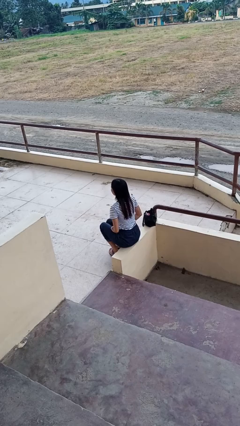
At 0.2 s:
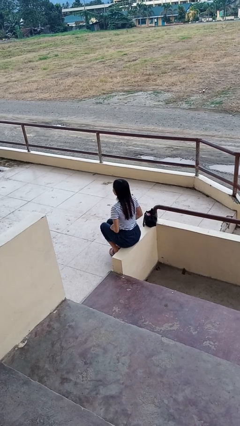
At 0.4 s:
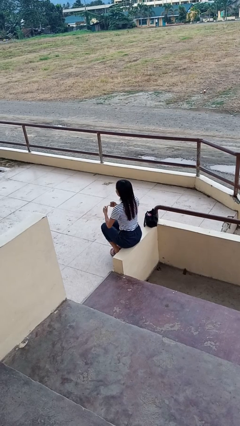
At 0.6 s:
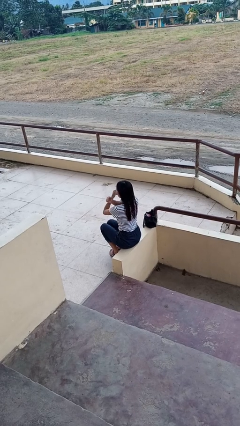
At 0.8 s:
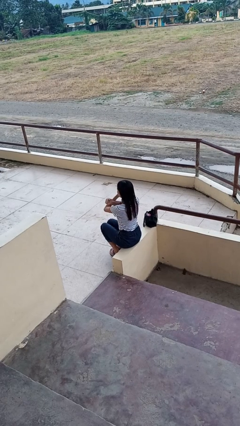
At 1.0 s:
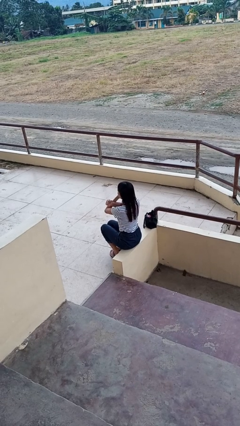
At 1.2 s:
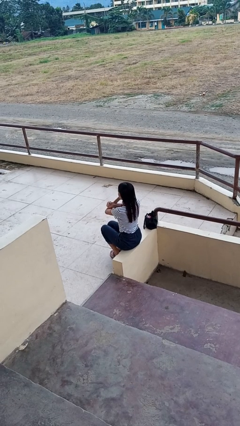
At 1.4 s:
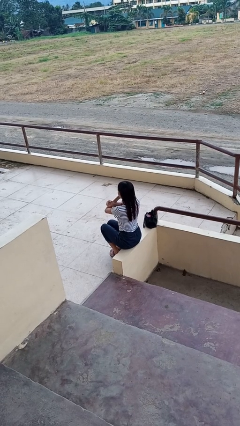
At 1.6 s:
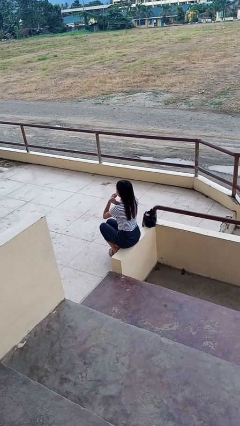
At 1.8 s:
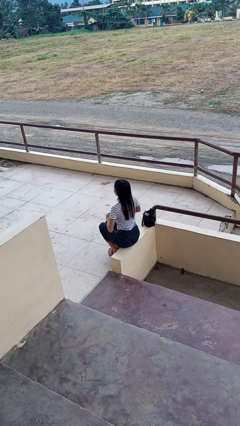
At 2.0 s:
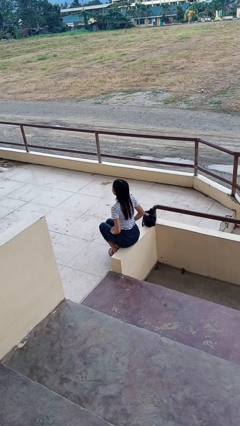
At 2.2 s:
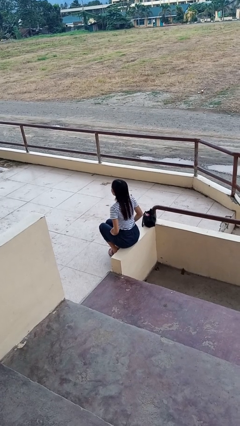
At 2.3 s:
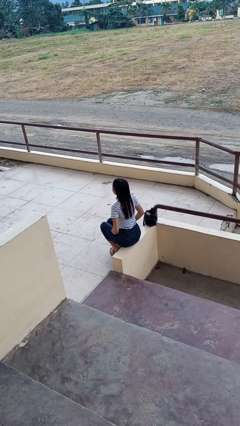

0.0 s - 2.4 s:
person gestures arms x

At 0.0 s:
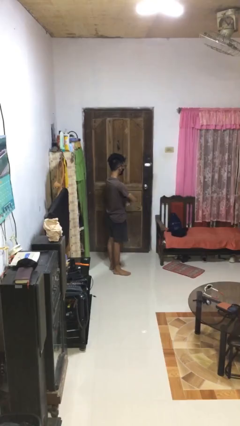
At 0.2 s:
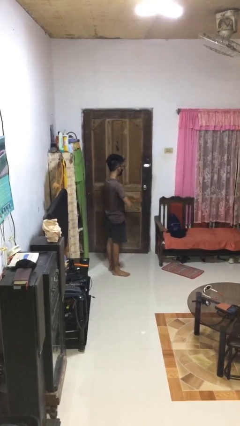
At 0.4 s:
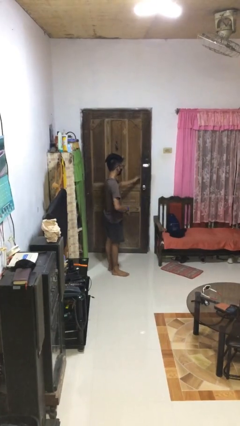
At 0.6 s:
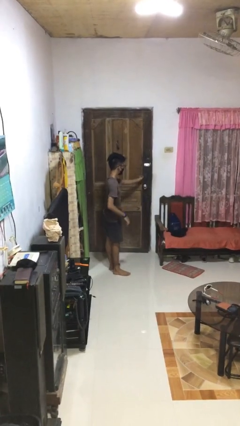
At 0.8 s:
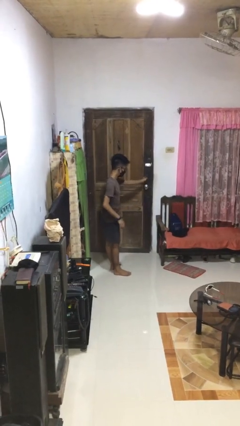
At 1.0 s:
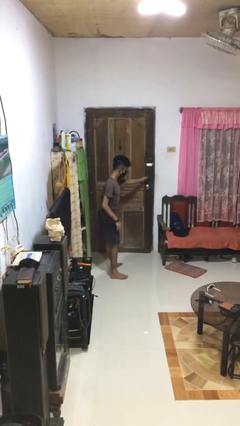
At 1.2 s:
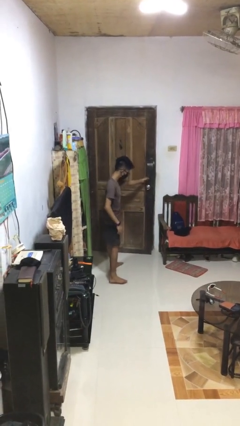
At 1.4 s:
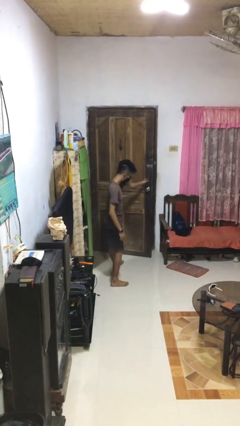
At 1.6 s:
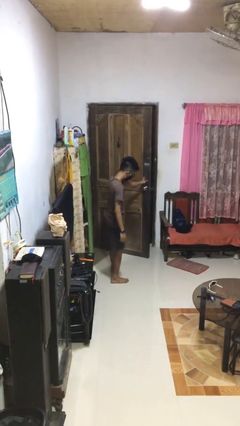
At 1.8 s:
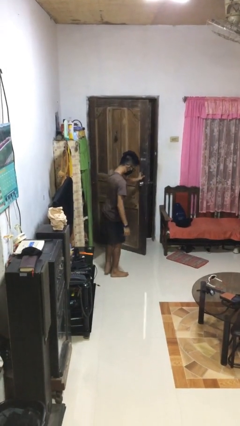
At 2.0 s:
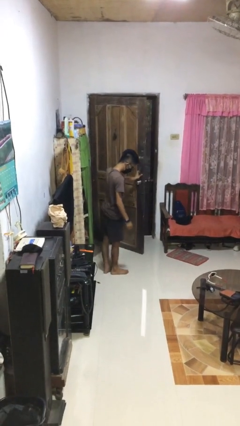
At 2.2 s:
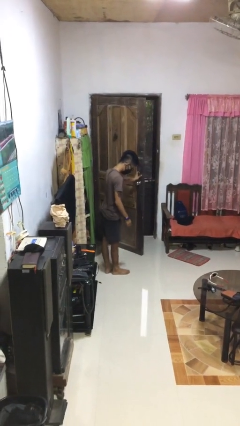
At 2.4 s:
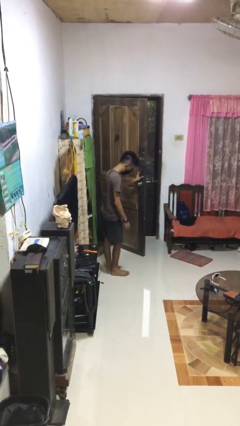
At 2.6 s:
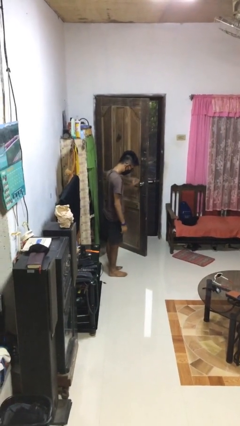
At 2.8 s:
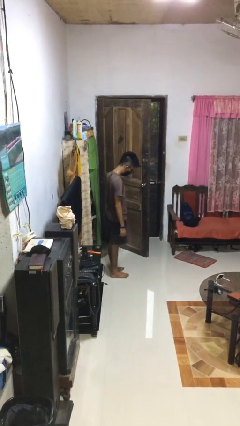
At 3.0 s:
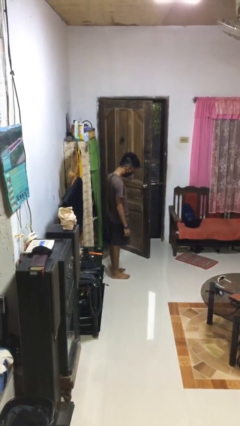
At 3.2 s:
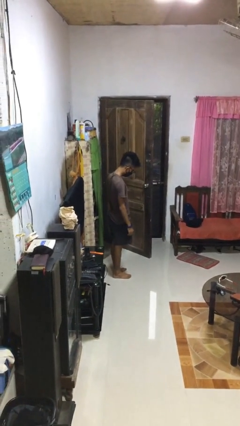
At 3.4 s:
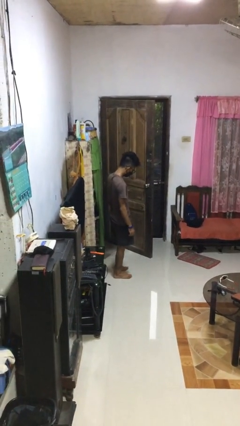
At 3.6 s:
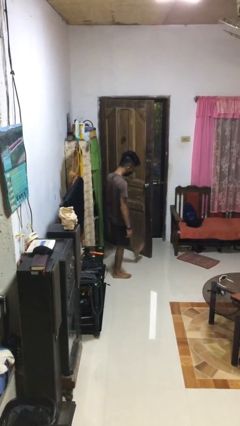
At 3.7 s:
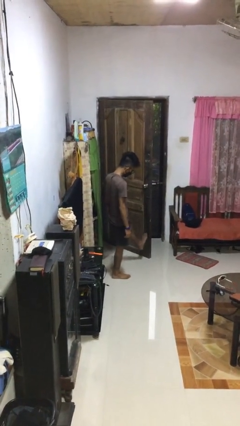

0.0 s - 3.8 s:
person opens facility door

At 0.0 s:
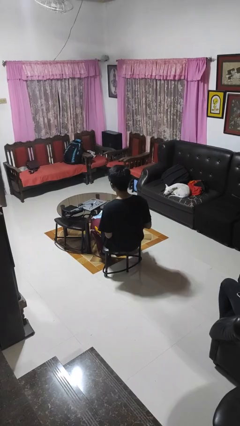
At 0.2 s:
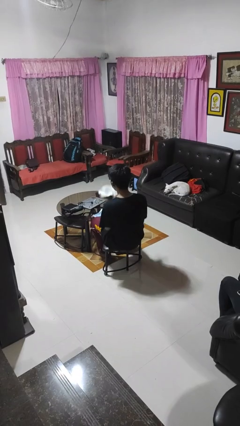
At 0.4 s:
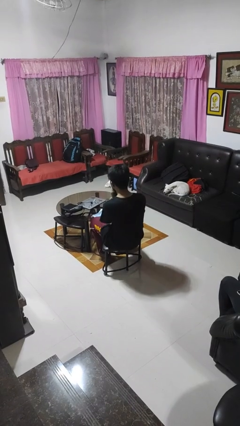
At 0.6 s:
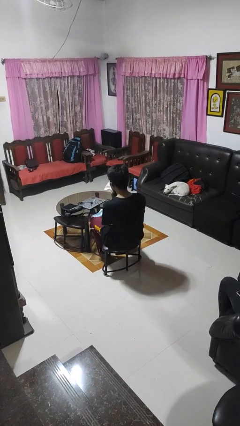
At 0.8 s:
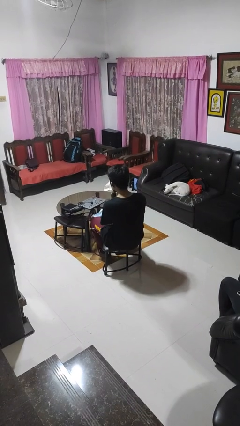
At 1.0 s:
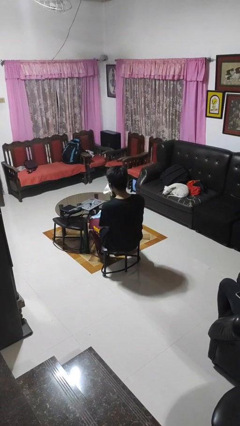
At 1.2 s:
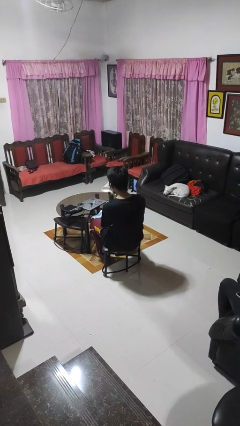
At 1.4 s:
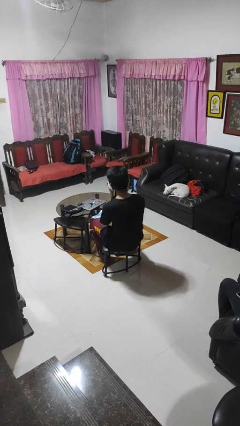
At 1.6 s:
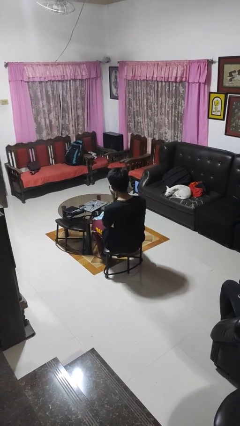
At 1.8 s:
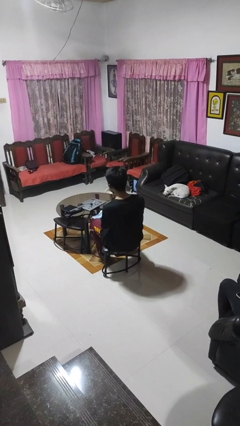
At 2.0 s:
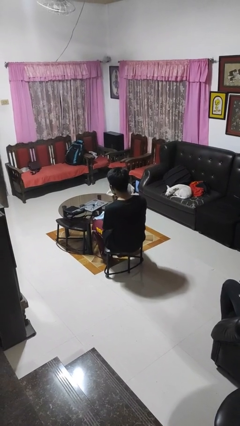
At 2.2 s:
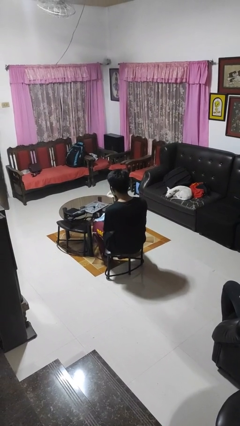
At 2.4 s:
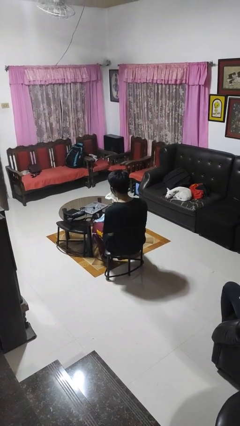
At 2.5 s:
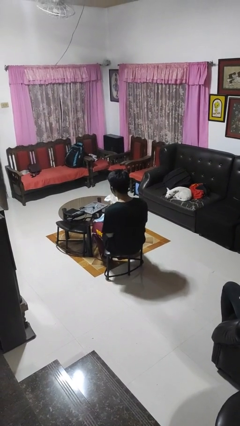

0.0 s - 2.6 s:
person wipes mouth with napkin

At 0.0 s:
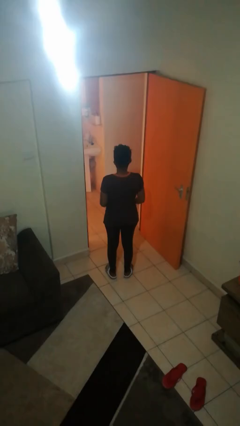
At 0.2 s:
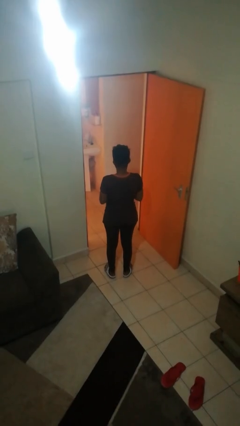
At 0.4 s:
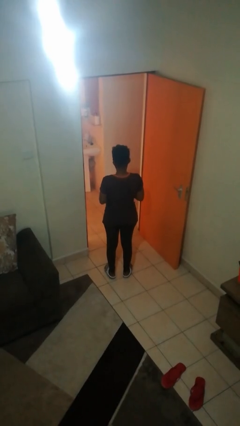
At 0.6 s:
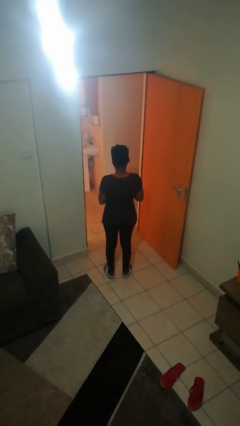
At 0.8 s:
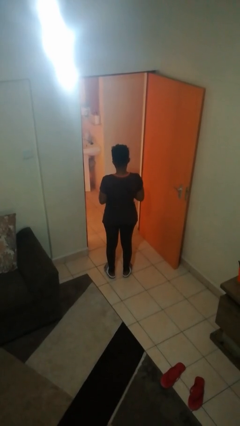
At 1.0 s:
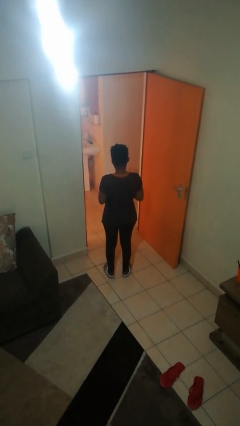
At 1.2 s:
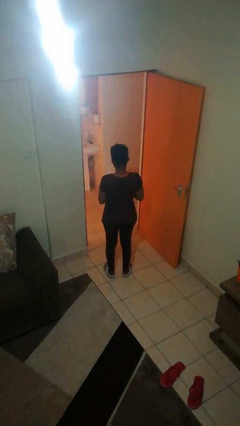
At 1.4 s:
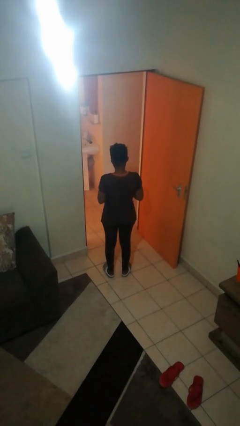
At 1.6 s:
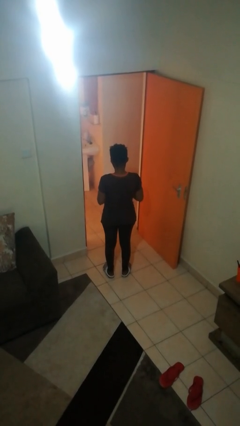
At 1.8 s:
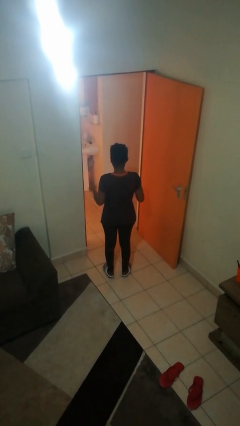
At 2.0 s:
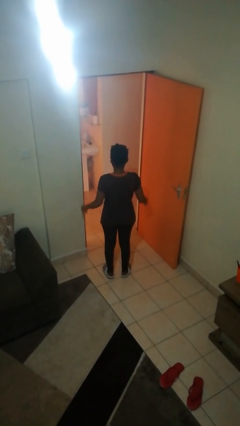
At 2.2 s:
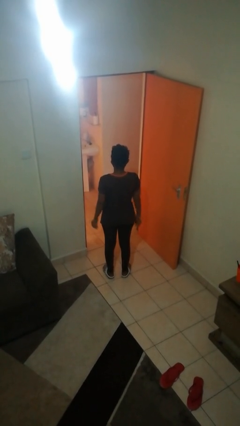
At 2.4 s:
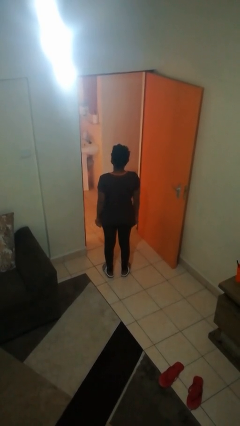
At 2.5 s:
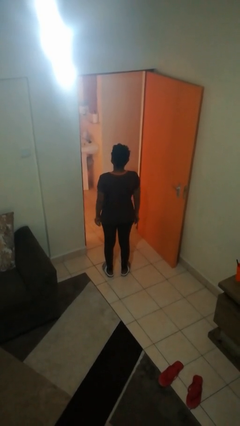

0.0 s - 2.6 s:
person takes off ring

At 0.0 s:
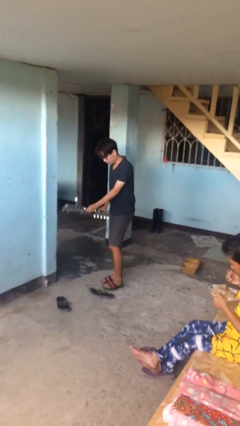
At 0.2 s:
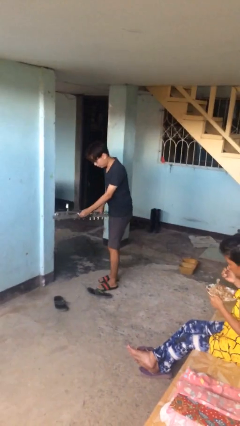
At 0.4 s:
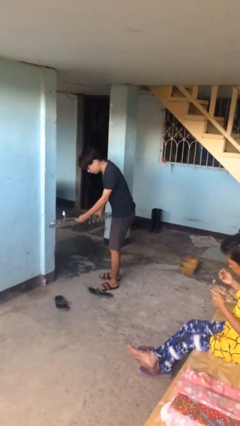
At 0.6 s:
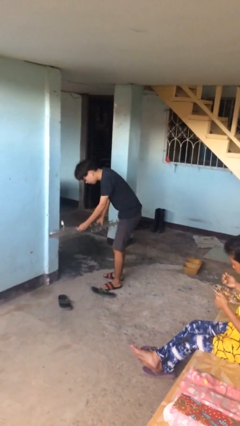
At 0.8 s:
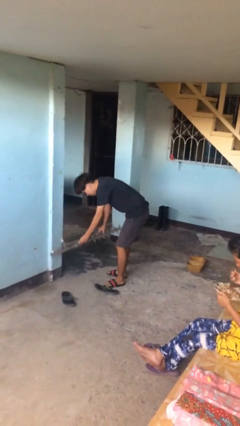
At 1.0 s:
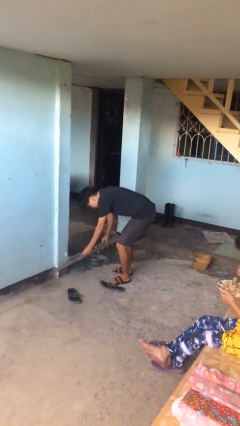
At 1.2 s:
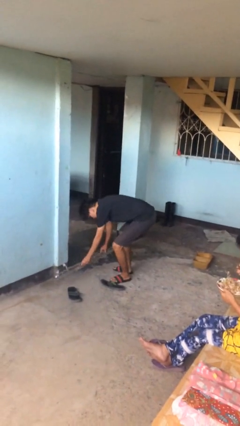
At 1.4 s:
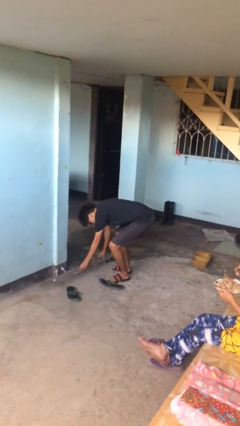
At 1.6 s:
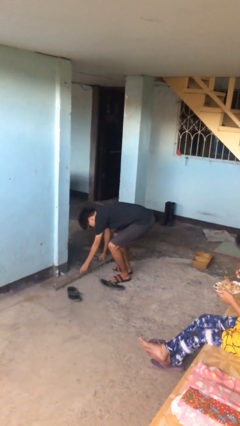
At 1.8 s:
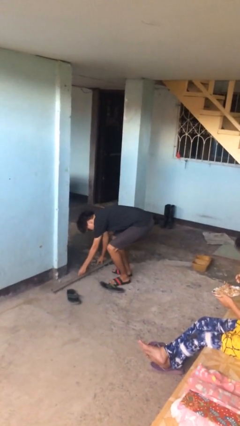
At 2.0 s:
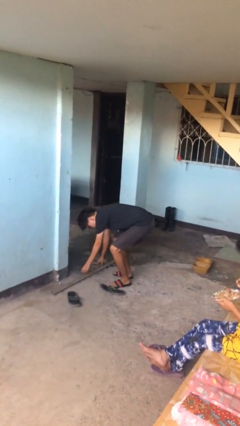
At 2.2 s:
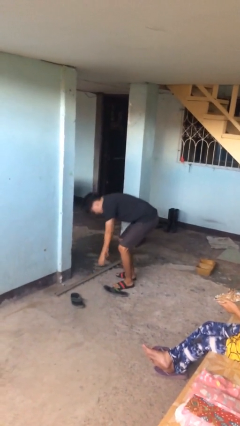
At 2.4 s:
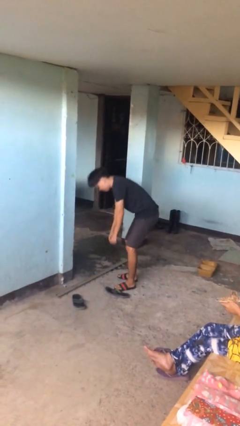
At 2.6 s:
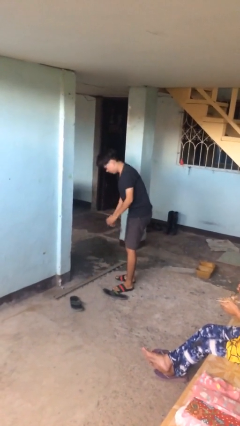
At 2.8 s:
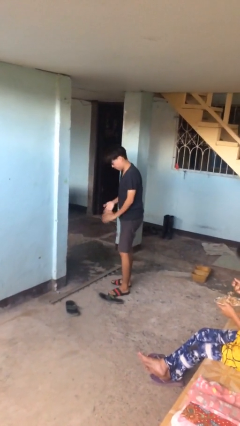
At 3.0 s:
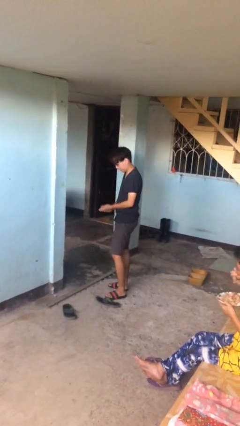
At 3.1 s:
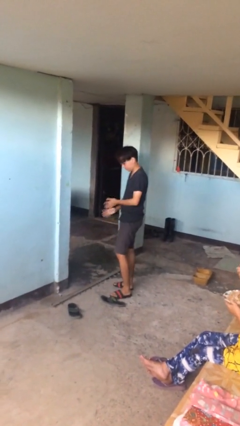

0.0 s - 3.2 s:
person puts down object on floor

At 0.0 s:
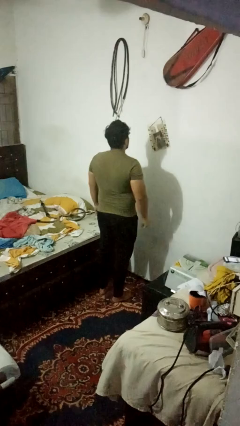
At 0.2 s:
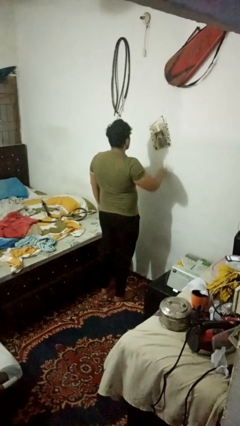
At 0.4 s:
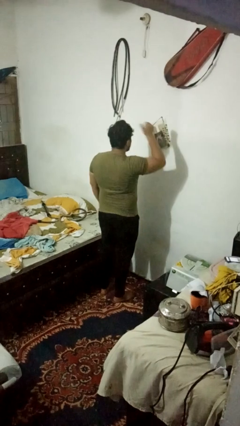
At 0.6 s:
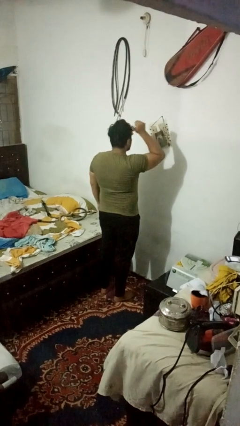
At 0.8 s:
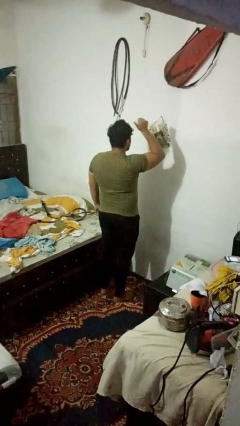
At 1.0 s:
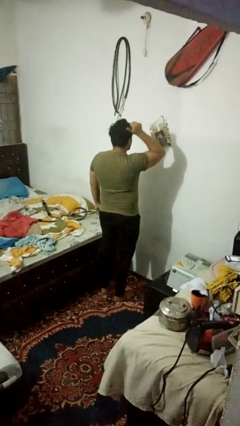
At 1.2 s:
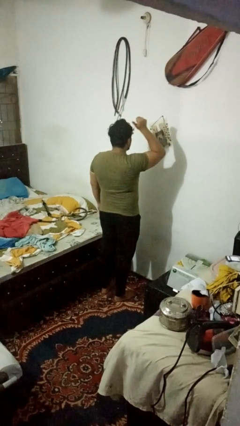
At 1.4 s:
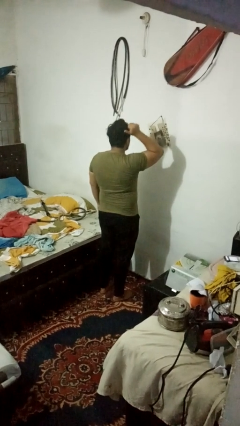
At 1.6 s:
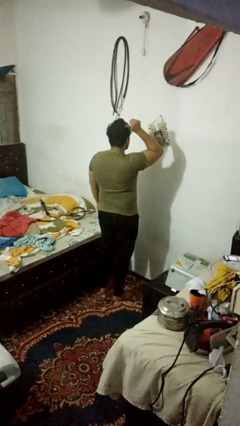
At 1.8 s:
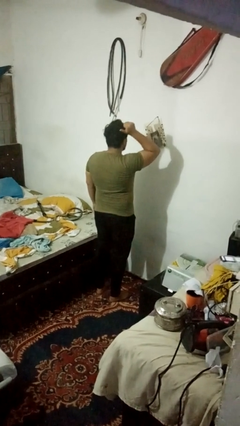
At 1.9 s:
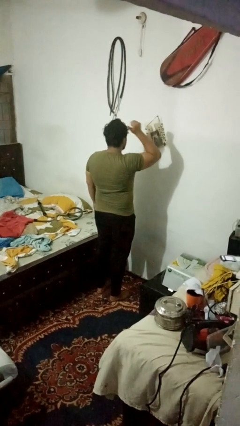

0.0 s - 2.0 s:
person gestures behind me

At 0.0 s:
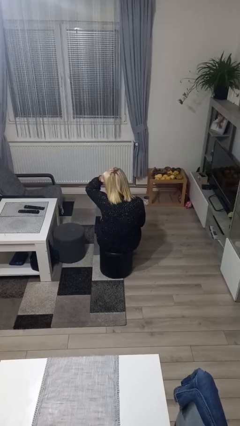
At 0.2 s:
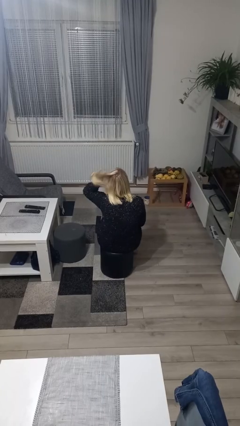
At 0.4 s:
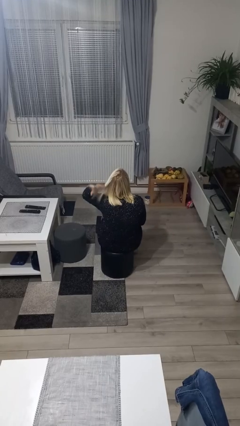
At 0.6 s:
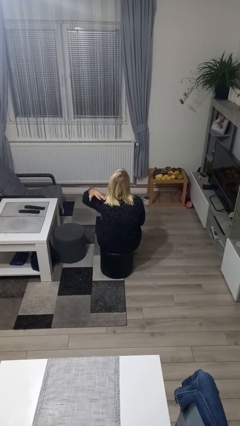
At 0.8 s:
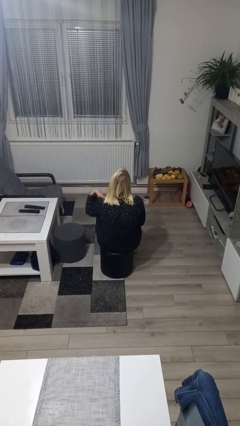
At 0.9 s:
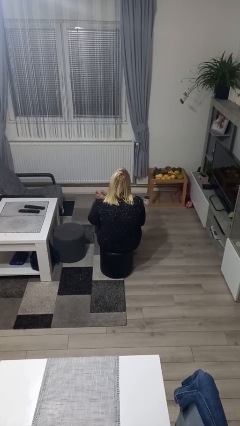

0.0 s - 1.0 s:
person strokes hair
